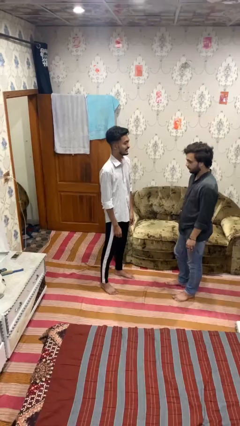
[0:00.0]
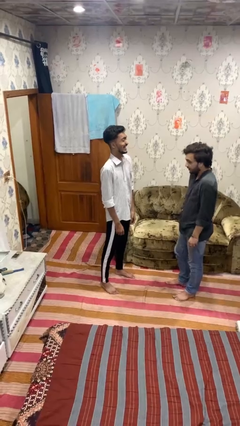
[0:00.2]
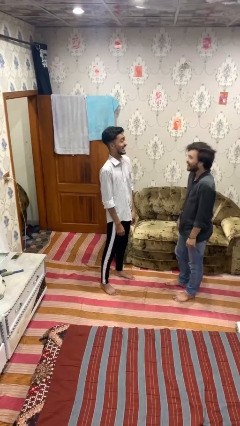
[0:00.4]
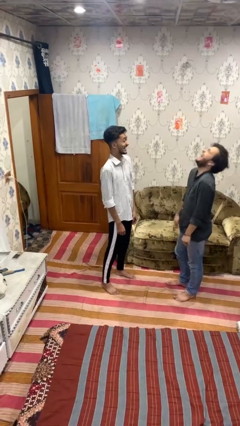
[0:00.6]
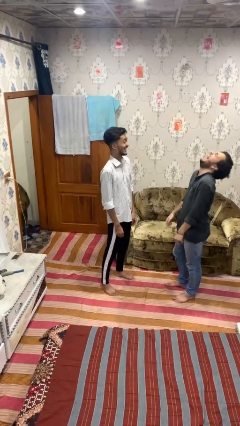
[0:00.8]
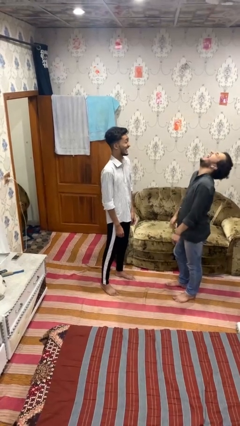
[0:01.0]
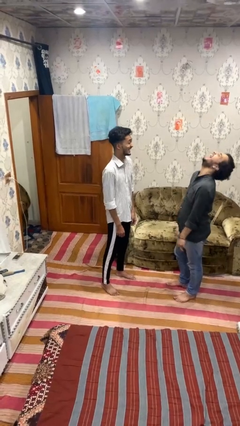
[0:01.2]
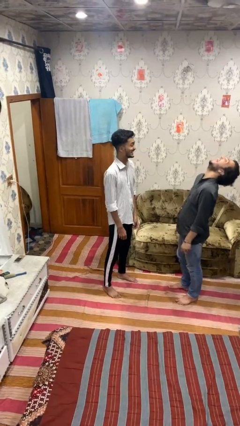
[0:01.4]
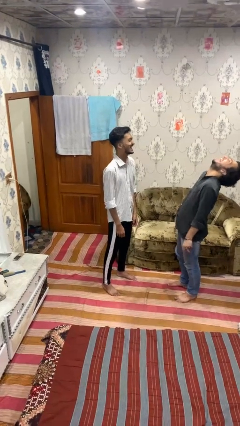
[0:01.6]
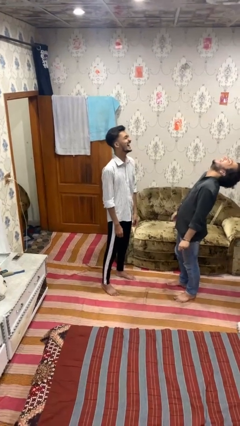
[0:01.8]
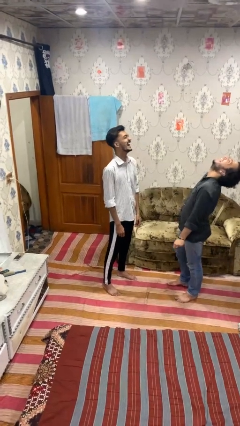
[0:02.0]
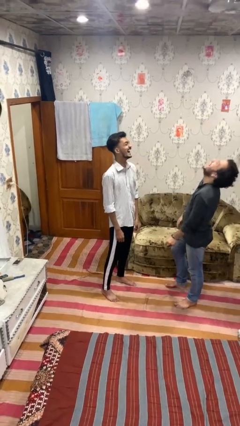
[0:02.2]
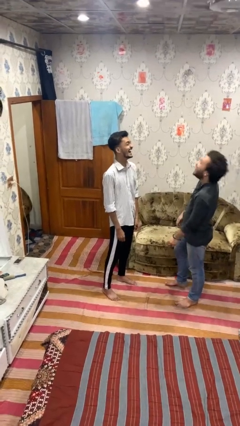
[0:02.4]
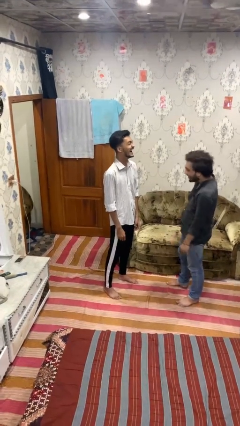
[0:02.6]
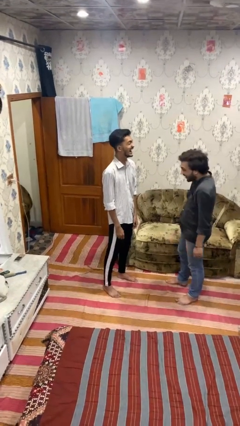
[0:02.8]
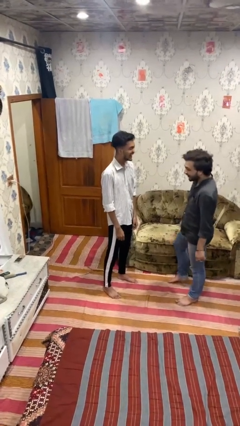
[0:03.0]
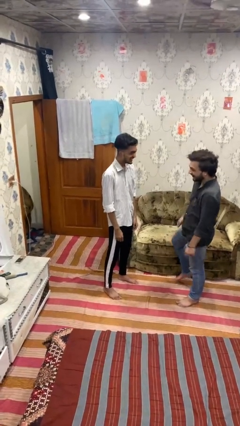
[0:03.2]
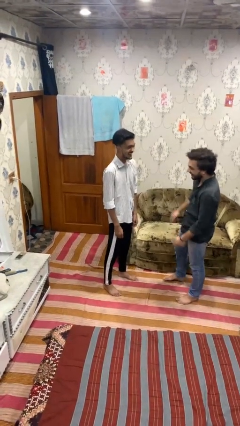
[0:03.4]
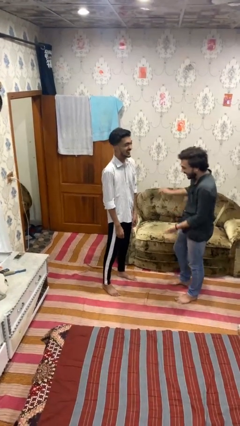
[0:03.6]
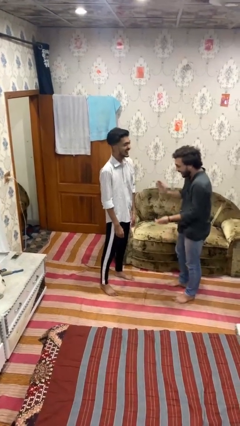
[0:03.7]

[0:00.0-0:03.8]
person laughs with person

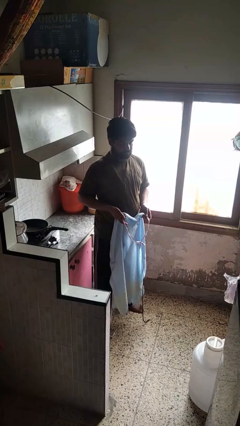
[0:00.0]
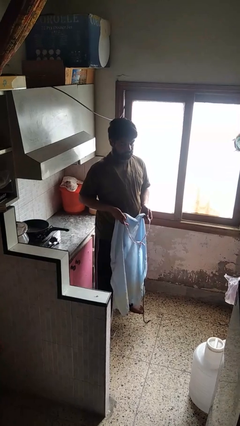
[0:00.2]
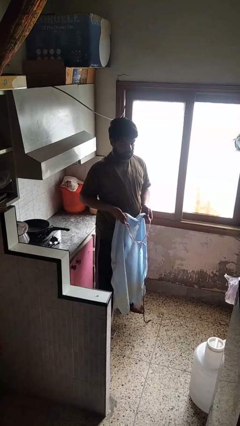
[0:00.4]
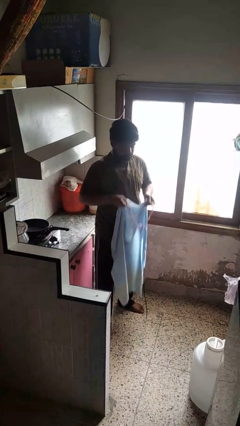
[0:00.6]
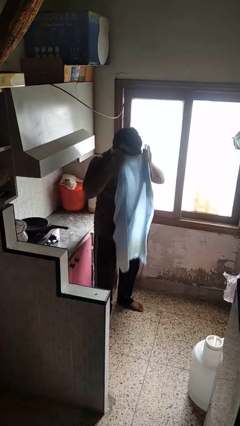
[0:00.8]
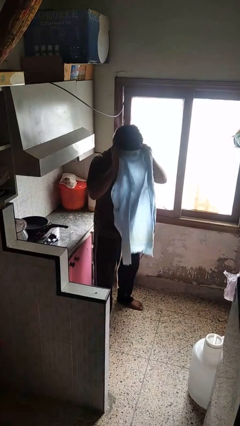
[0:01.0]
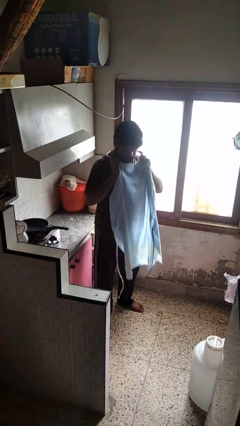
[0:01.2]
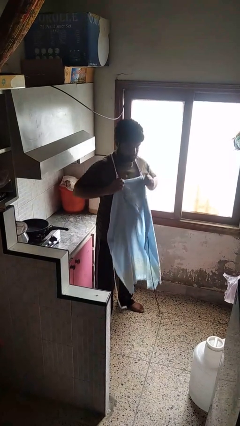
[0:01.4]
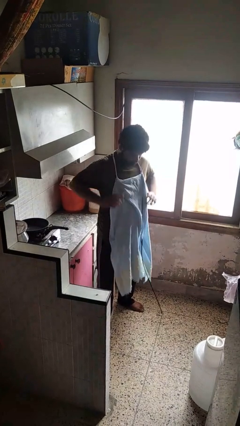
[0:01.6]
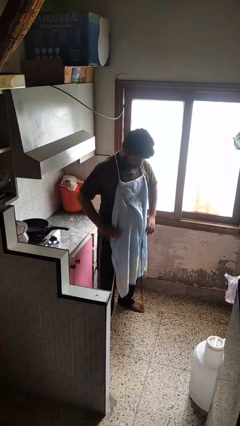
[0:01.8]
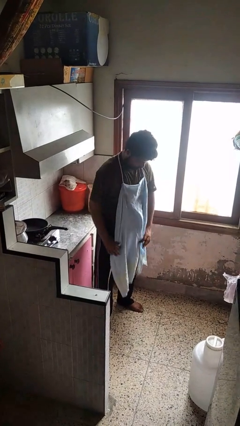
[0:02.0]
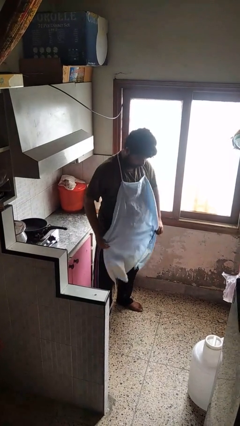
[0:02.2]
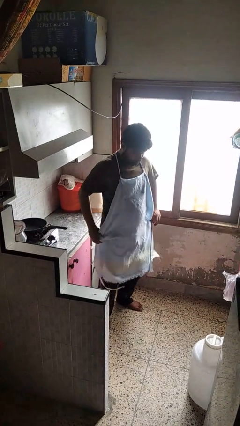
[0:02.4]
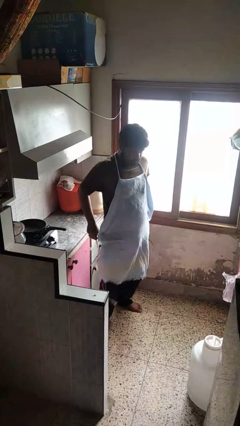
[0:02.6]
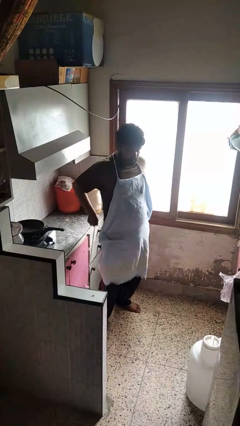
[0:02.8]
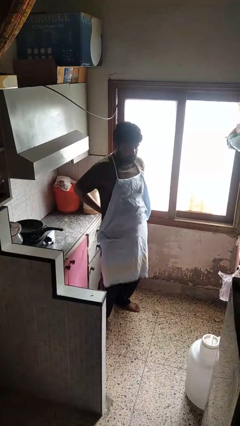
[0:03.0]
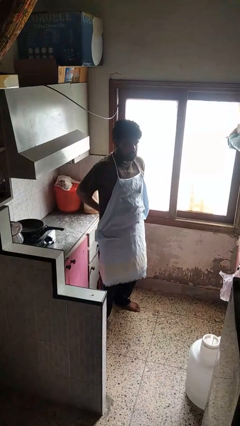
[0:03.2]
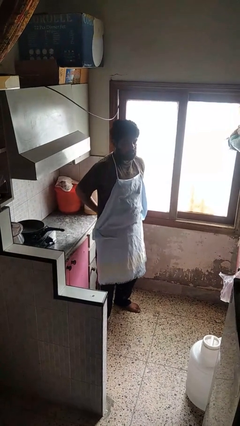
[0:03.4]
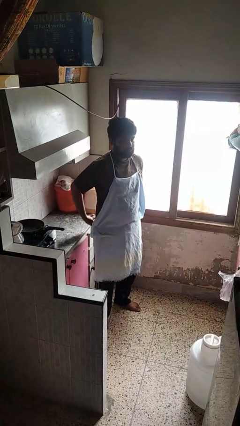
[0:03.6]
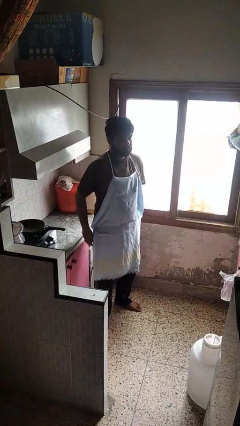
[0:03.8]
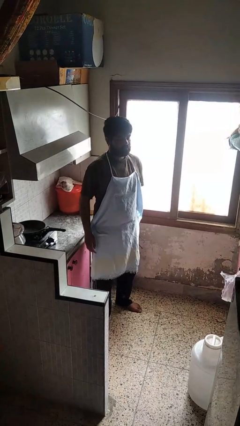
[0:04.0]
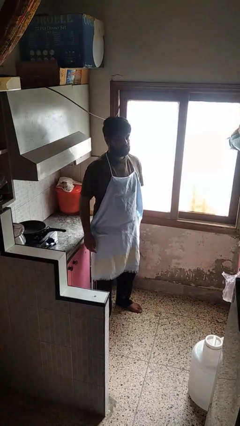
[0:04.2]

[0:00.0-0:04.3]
person puts on apron

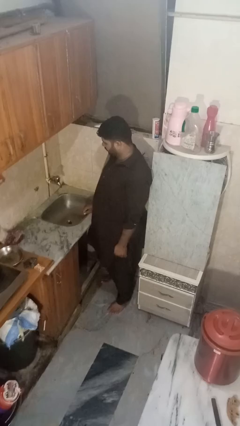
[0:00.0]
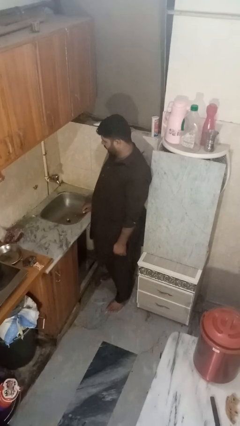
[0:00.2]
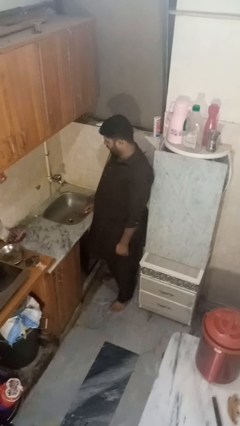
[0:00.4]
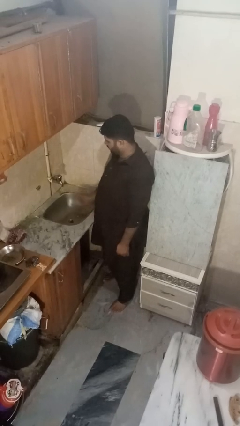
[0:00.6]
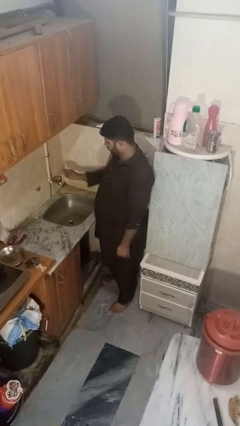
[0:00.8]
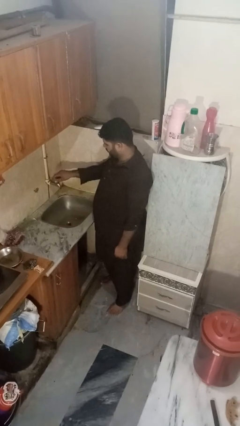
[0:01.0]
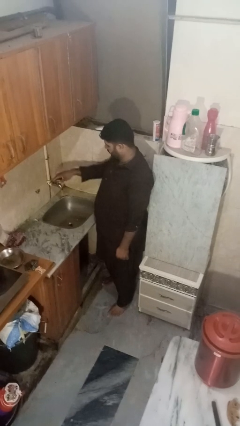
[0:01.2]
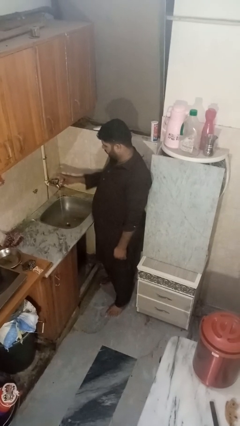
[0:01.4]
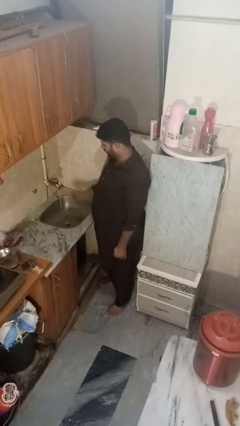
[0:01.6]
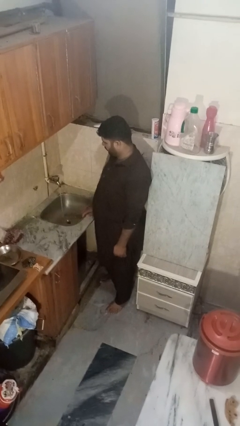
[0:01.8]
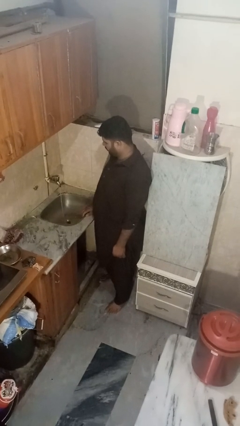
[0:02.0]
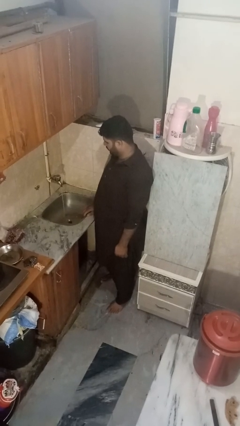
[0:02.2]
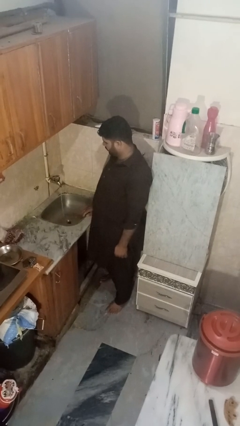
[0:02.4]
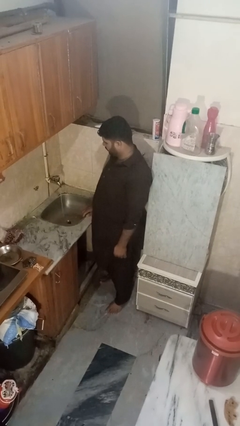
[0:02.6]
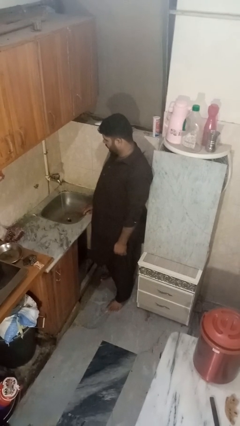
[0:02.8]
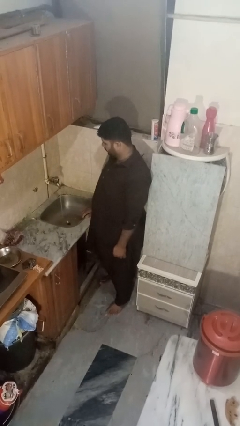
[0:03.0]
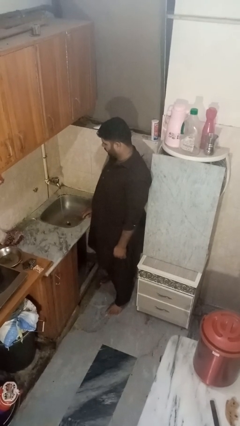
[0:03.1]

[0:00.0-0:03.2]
person turns on faucet

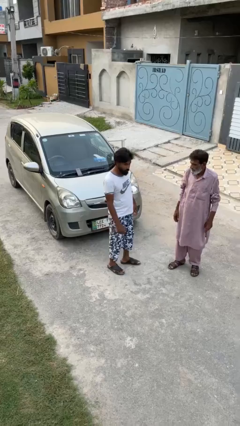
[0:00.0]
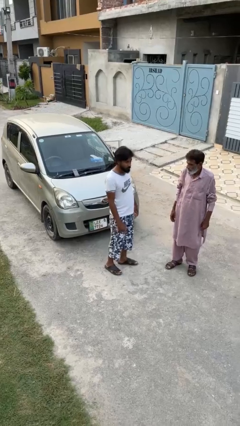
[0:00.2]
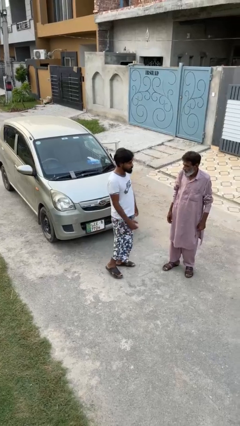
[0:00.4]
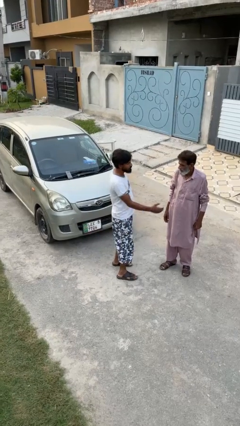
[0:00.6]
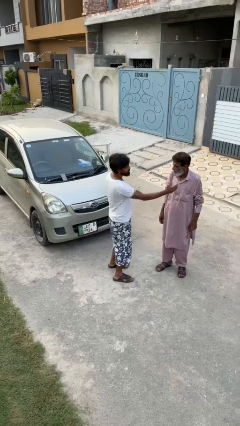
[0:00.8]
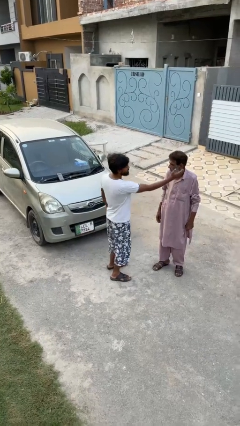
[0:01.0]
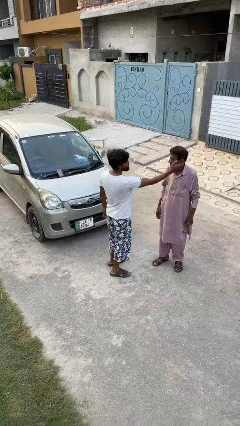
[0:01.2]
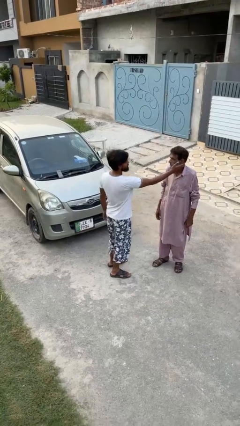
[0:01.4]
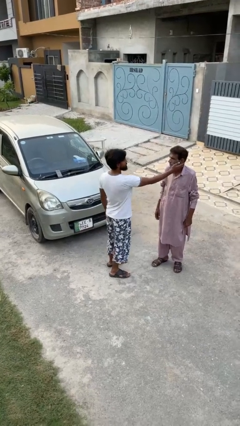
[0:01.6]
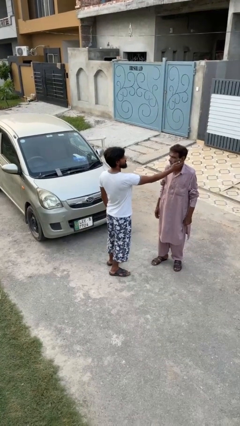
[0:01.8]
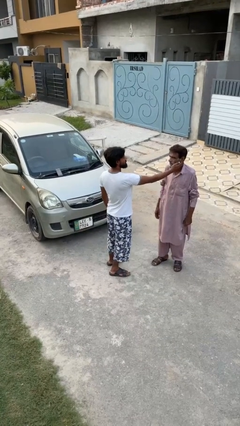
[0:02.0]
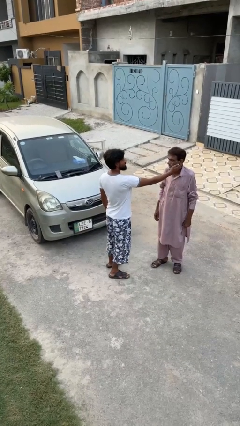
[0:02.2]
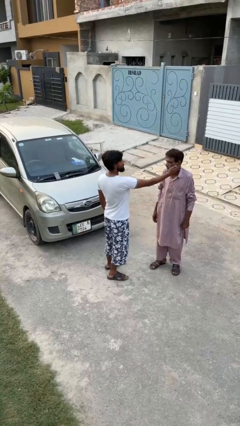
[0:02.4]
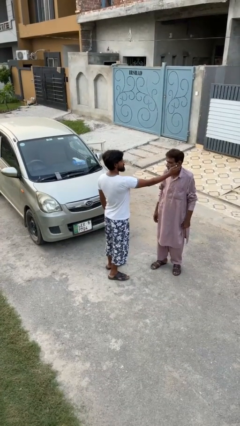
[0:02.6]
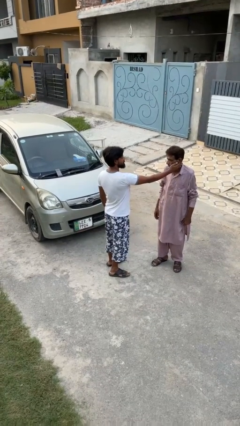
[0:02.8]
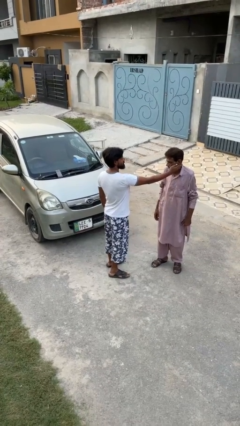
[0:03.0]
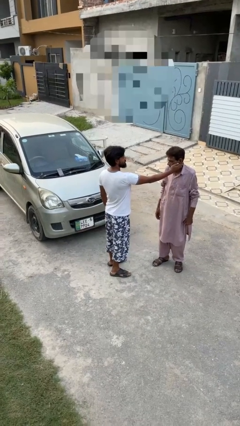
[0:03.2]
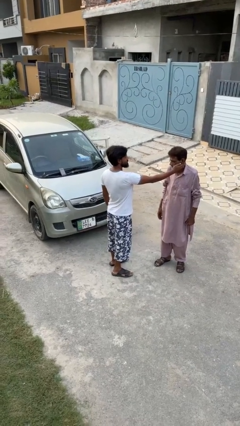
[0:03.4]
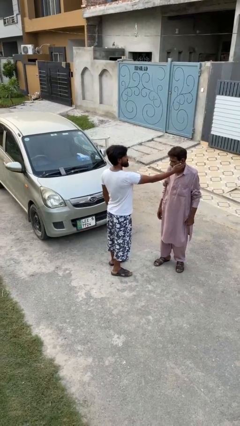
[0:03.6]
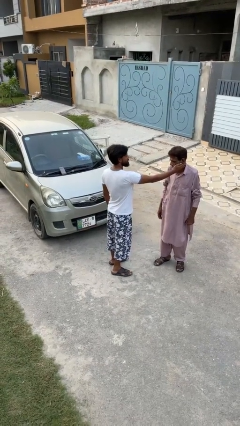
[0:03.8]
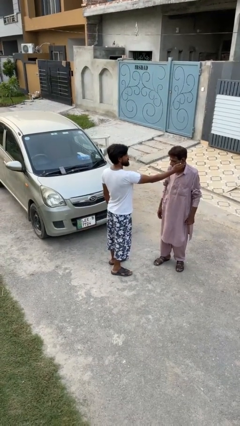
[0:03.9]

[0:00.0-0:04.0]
person touches face of person

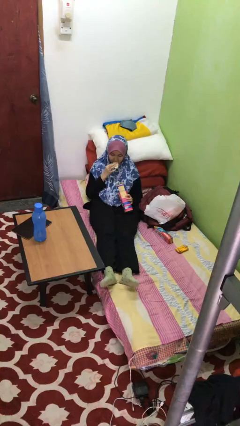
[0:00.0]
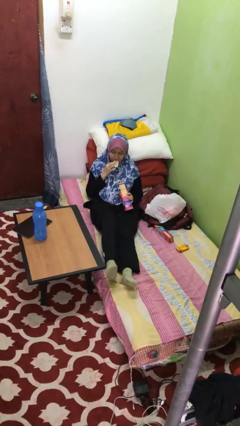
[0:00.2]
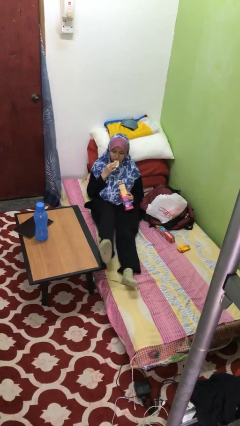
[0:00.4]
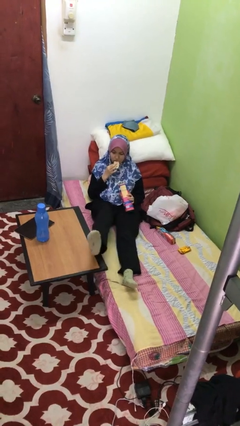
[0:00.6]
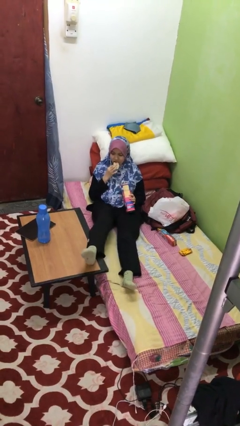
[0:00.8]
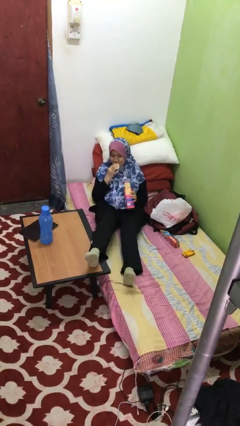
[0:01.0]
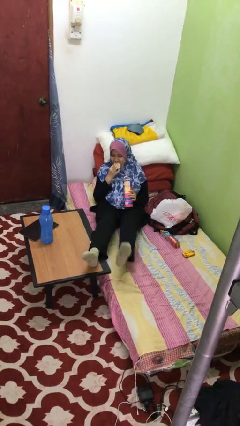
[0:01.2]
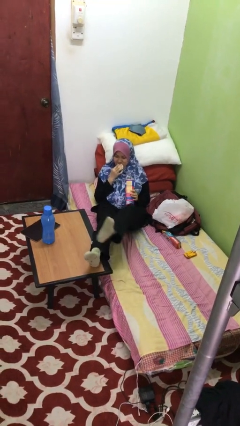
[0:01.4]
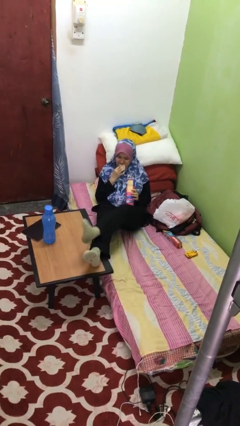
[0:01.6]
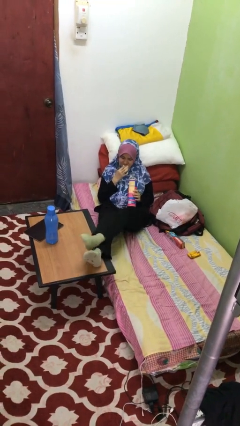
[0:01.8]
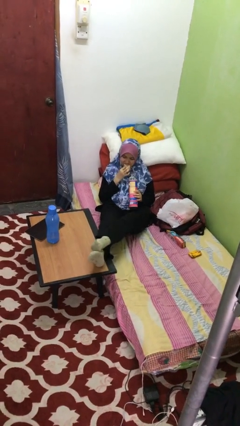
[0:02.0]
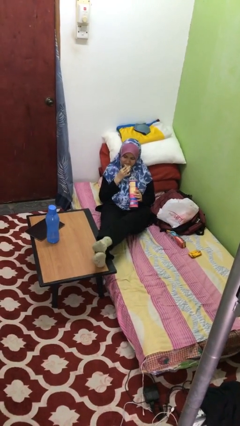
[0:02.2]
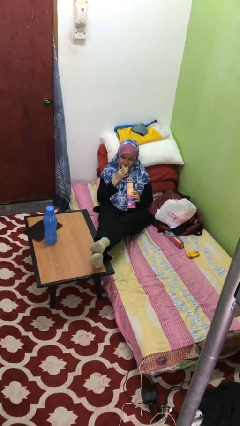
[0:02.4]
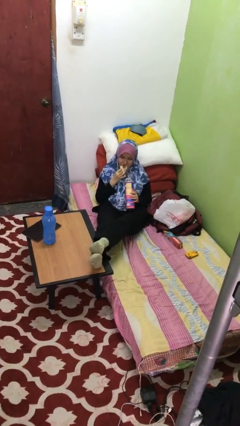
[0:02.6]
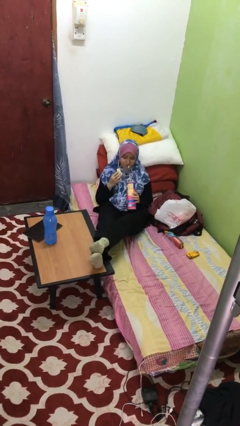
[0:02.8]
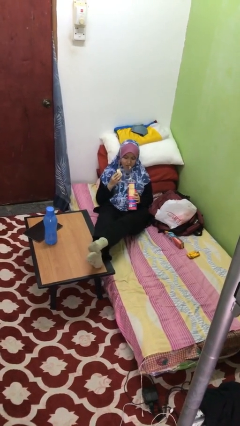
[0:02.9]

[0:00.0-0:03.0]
person puts feet up
